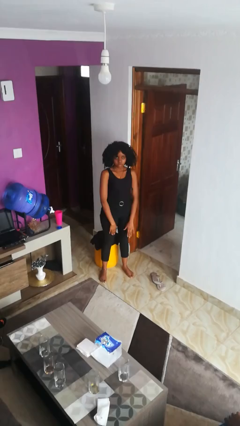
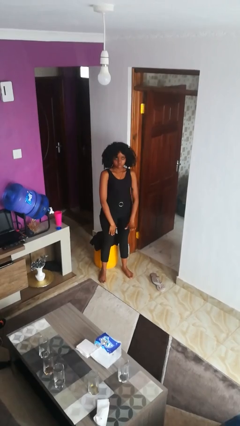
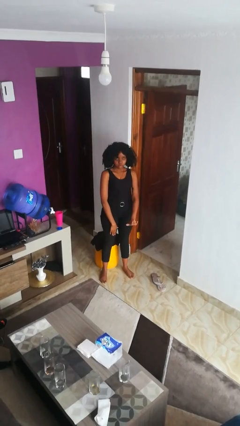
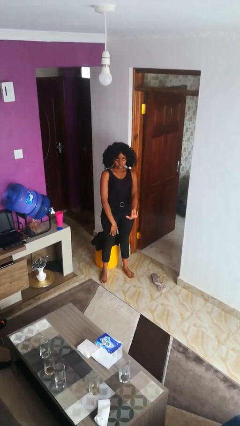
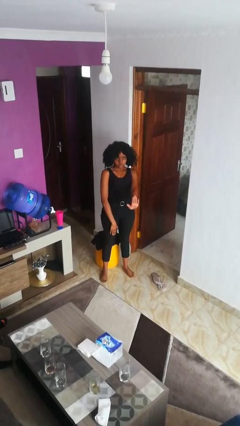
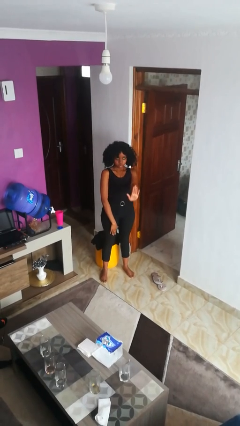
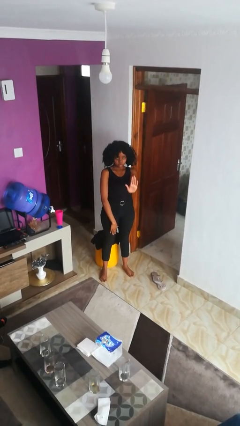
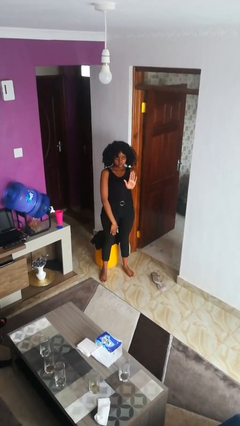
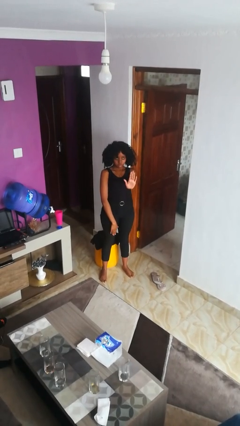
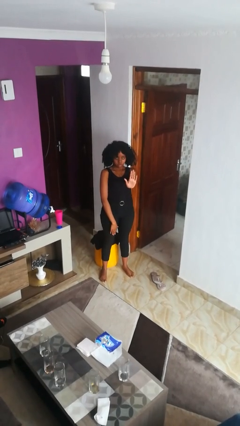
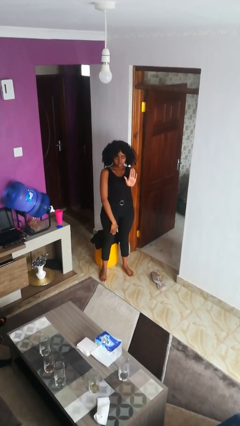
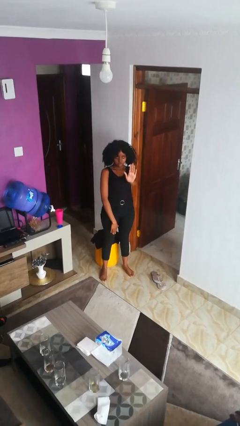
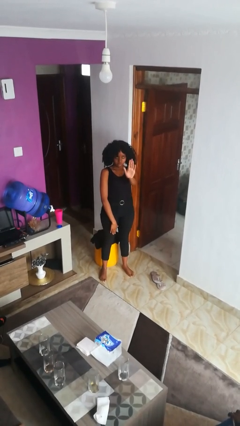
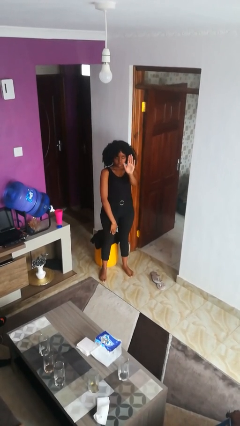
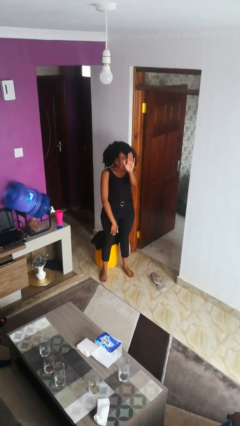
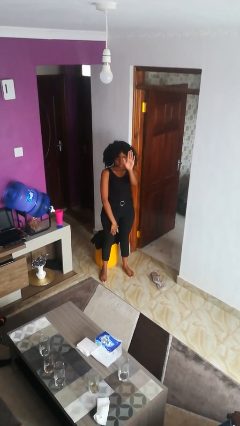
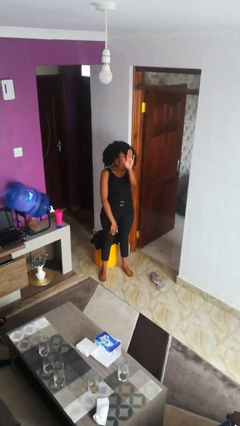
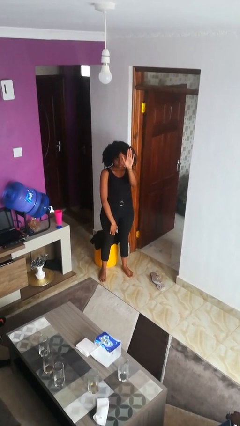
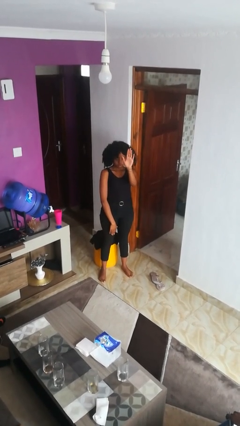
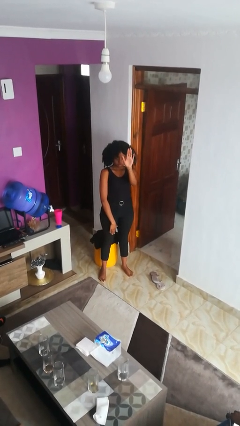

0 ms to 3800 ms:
person gestures swipe up

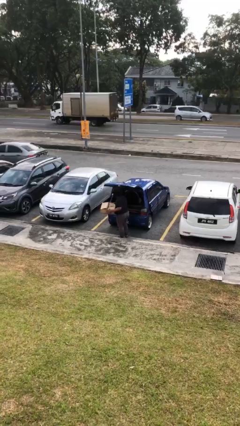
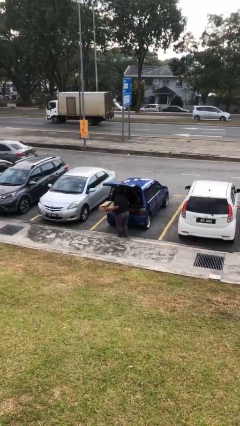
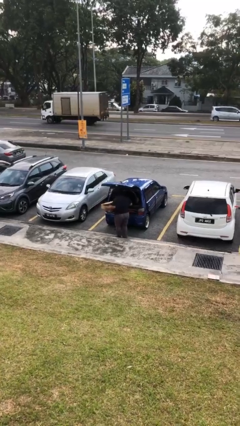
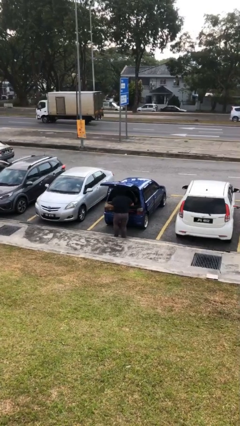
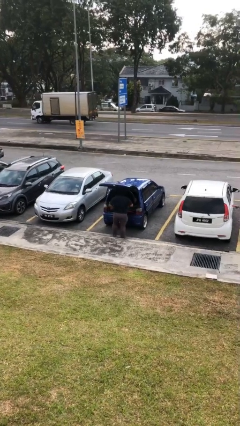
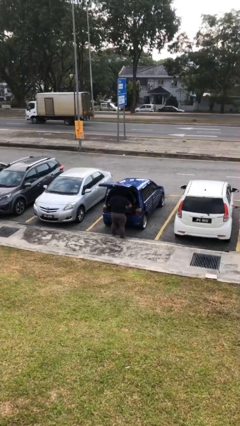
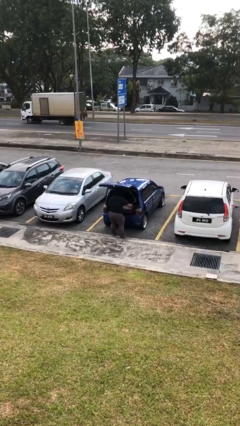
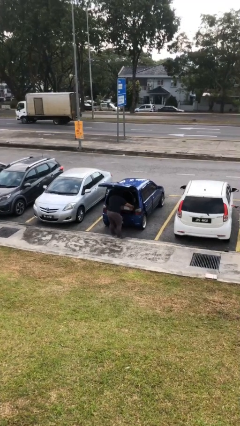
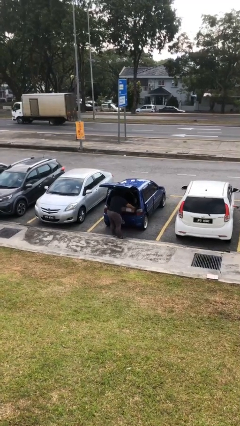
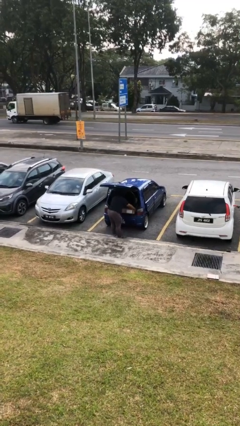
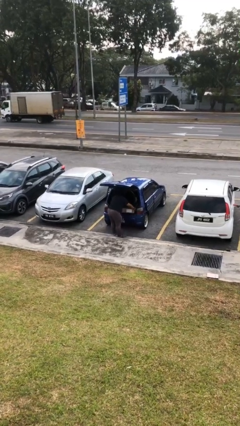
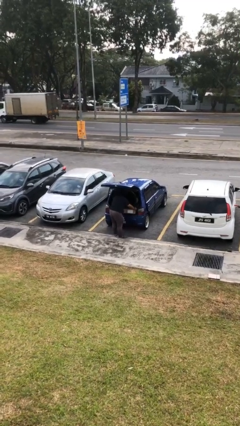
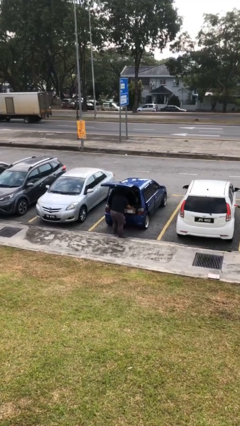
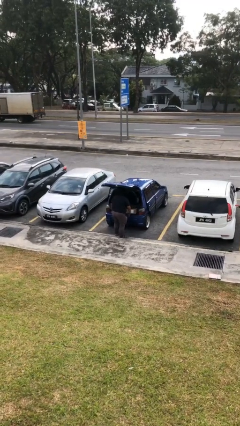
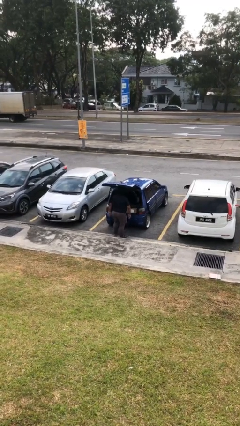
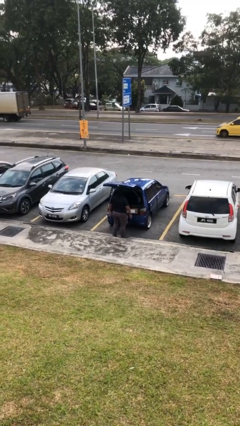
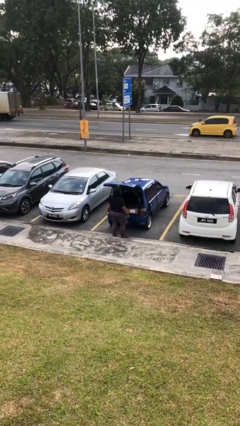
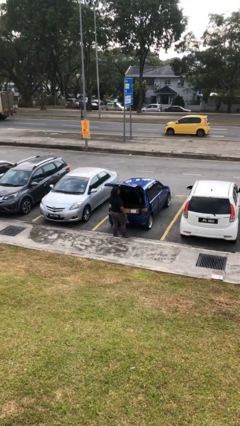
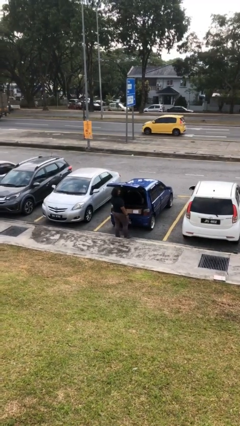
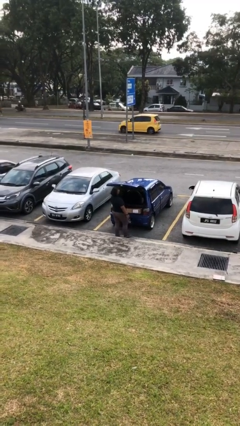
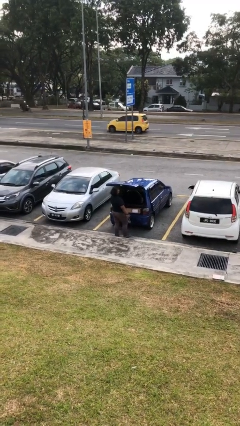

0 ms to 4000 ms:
person loads car

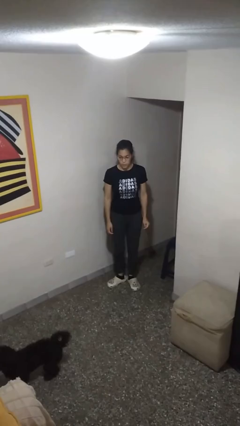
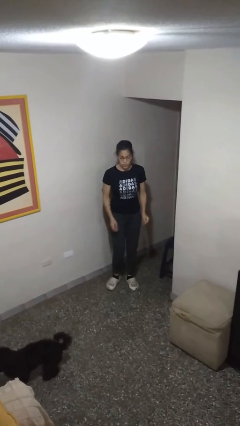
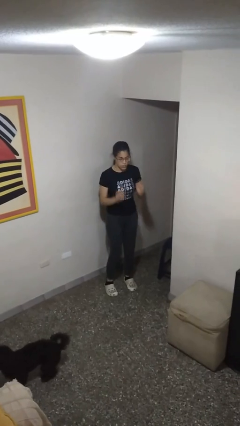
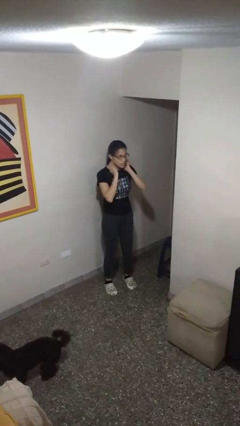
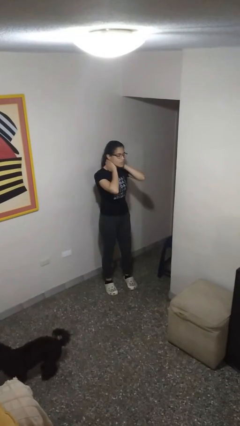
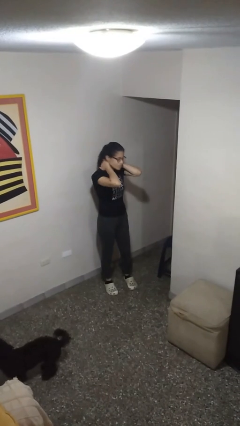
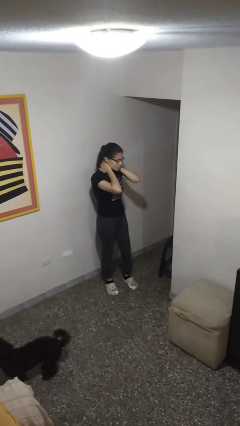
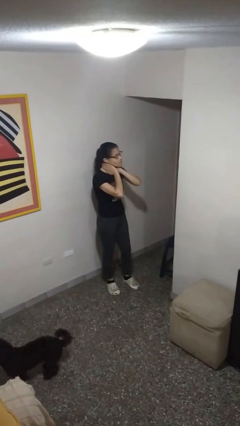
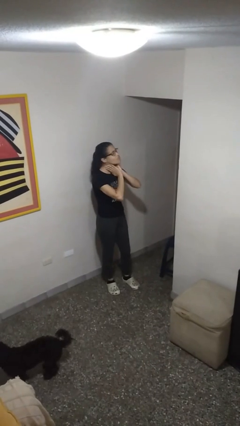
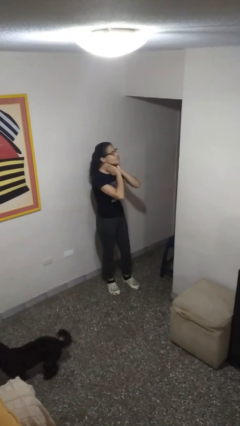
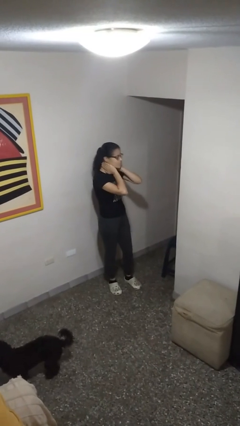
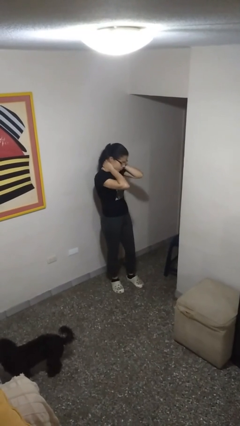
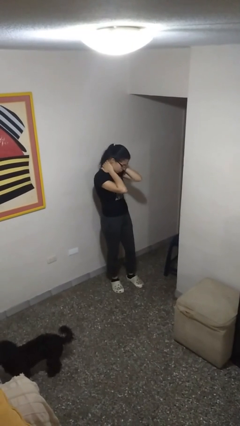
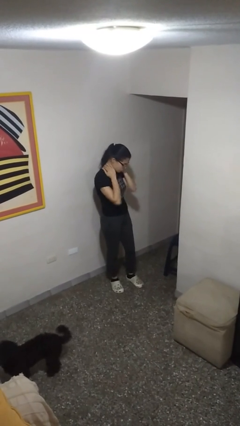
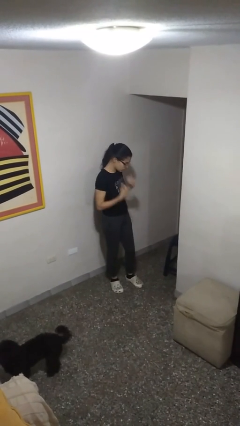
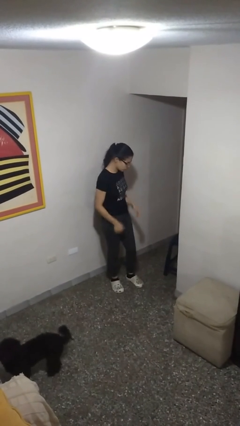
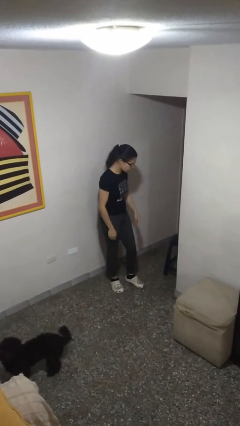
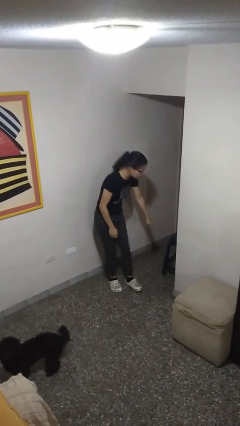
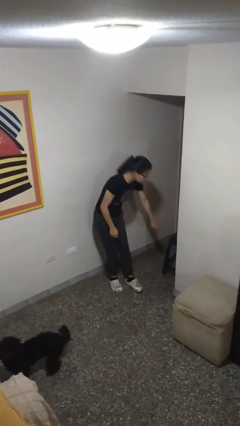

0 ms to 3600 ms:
person rubs neck

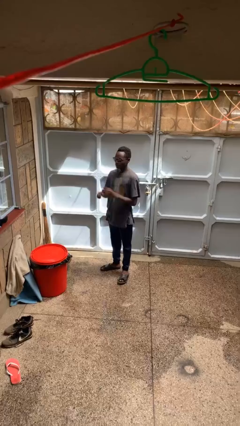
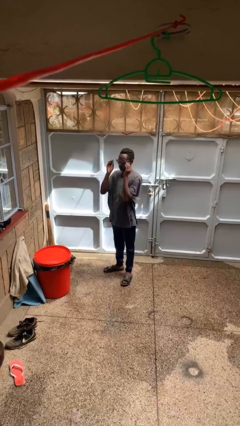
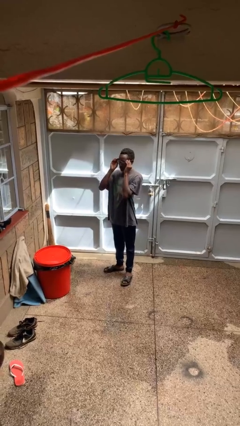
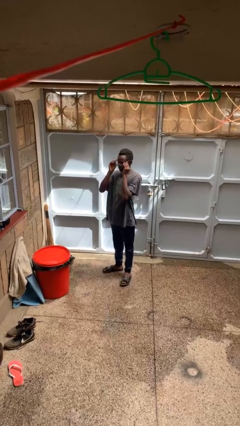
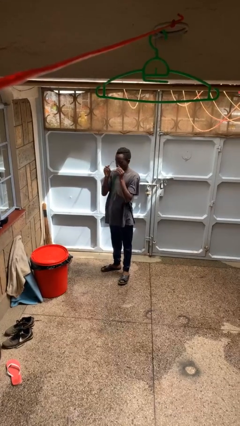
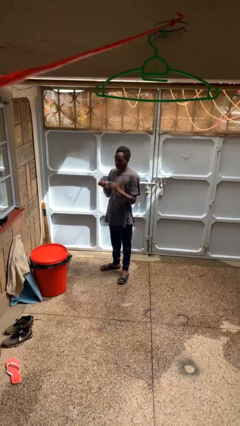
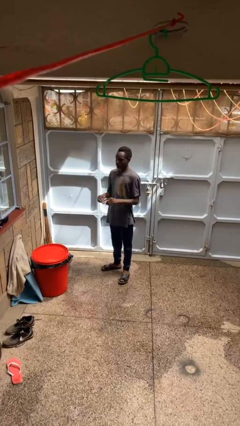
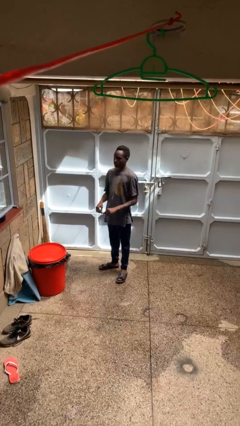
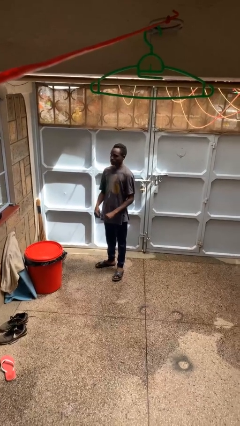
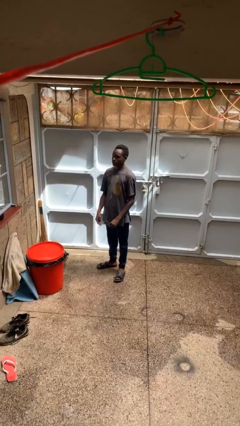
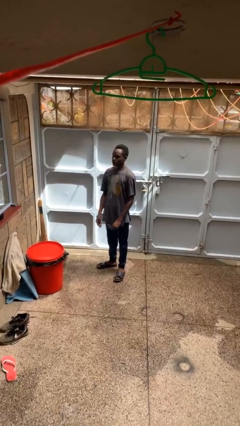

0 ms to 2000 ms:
person takes off glasses

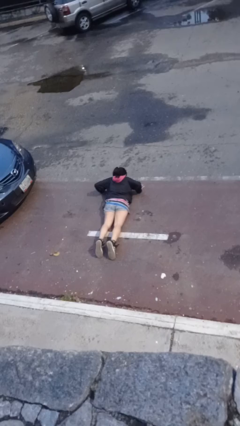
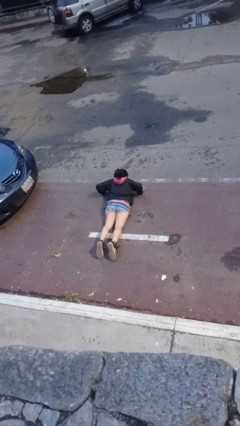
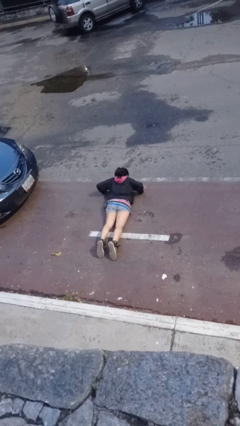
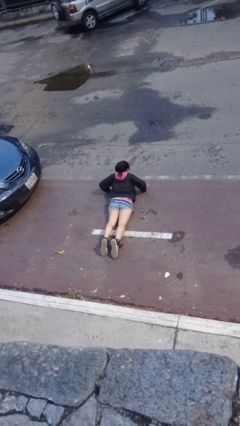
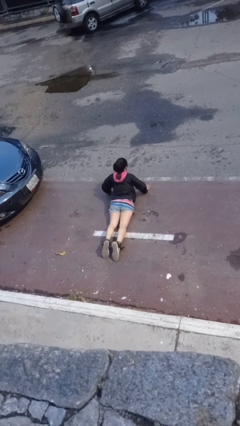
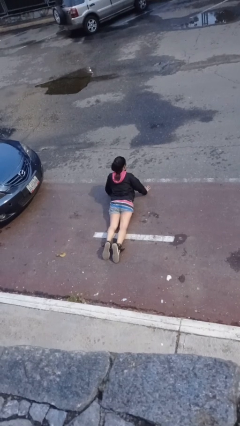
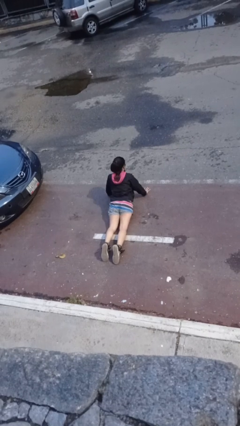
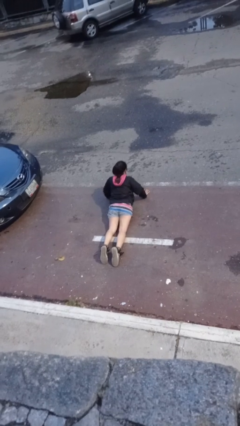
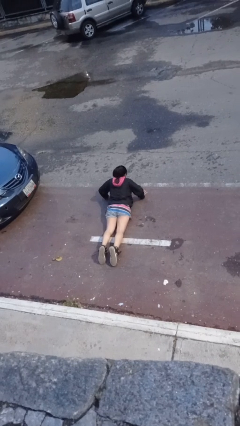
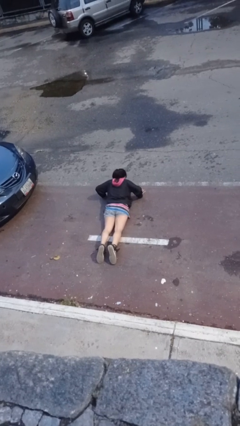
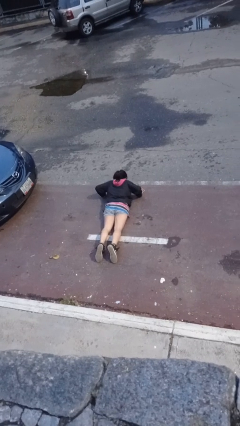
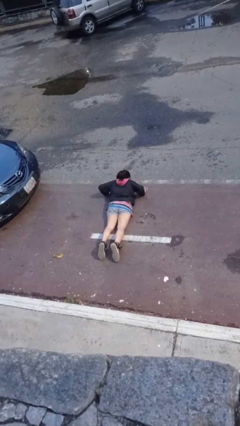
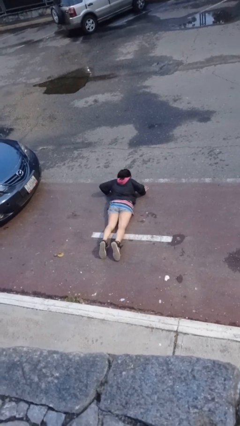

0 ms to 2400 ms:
person exercises with pushup

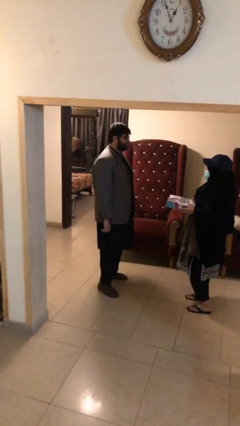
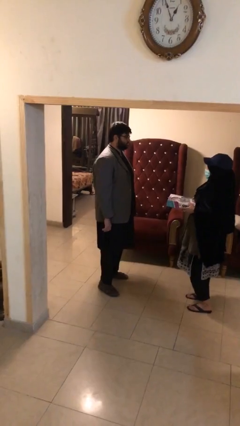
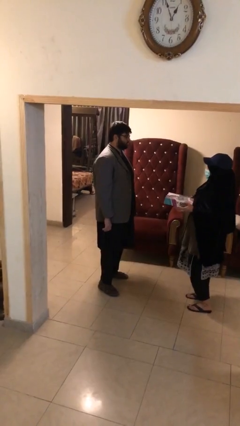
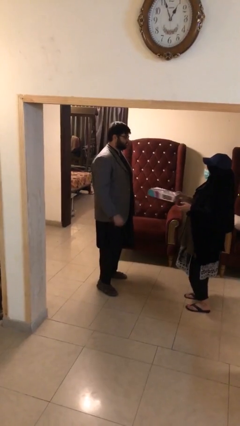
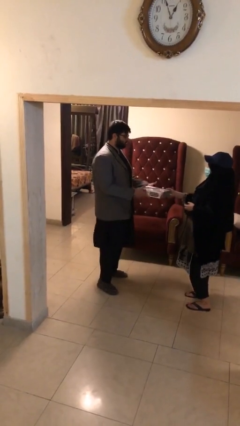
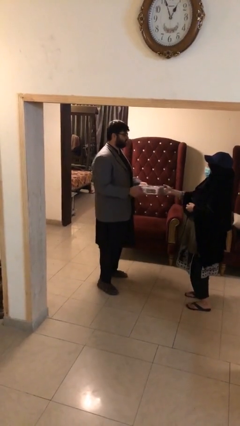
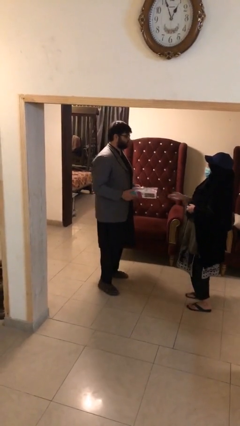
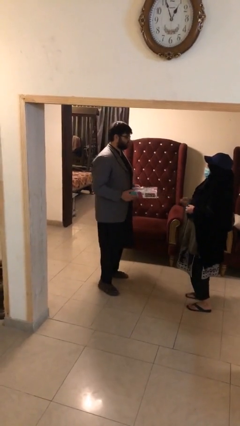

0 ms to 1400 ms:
person transfers object to person

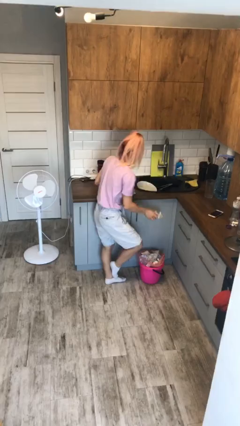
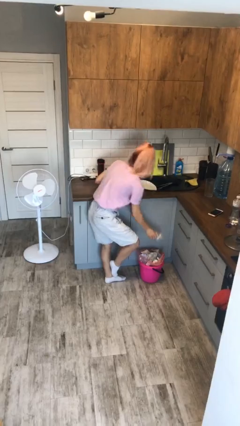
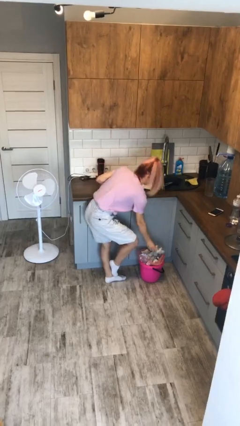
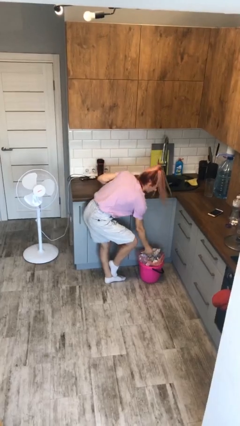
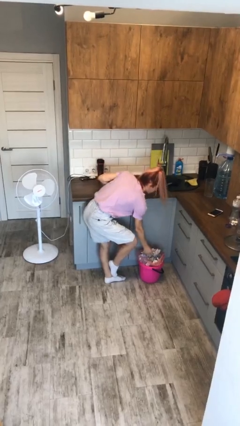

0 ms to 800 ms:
person discards trash
